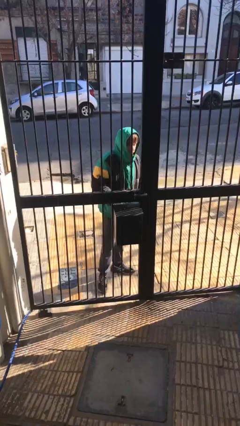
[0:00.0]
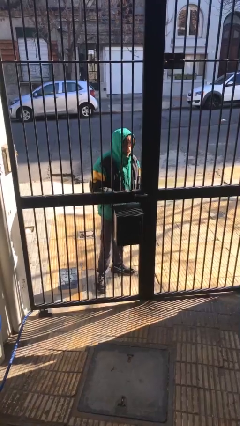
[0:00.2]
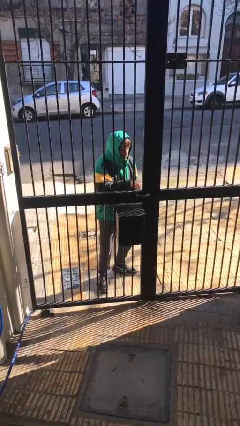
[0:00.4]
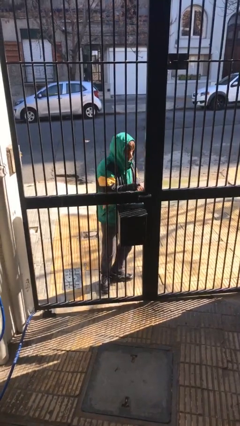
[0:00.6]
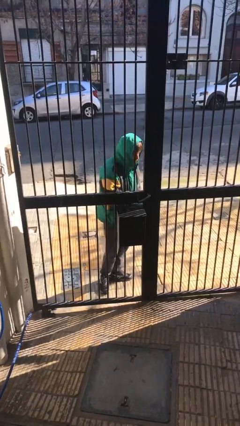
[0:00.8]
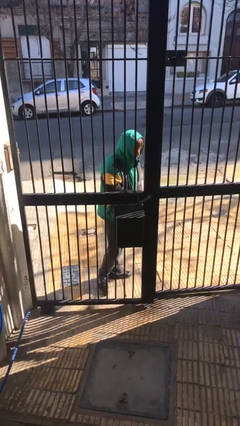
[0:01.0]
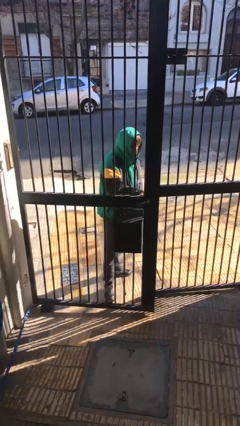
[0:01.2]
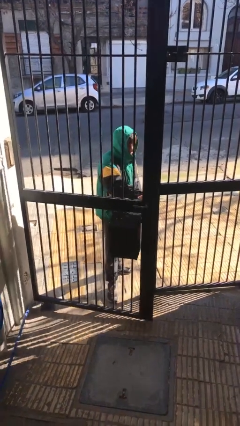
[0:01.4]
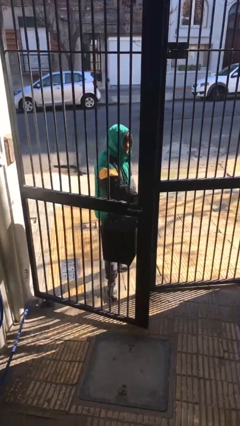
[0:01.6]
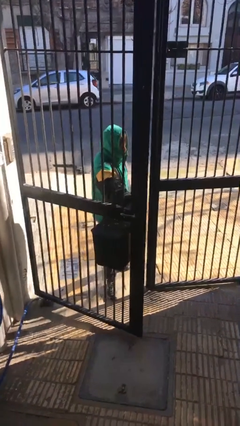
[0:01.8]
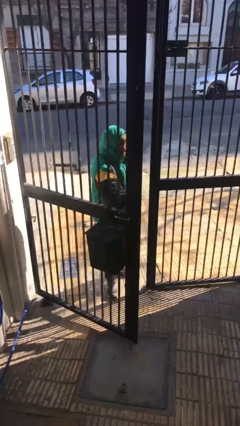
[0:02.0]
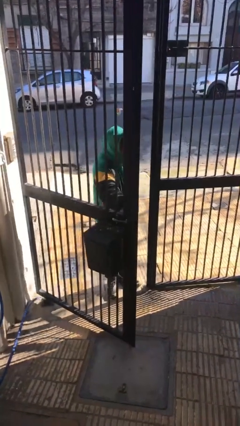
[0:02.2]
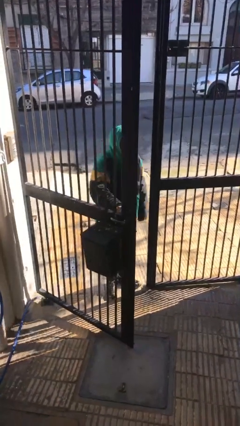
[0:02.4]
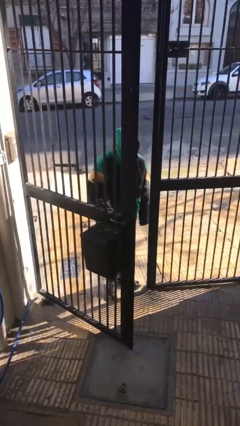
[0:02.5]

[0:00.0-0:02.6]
person opens gate

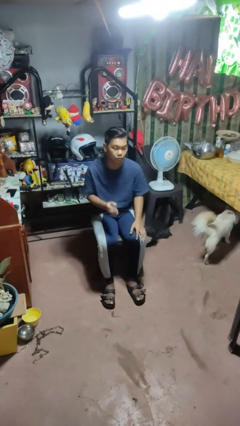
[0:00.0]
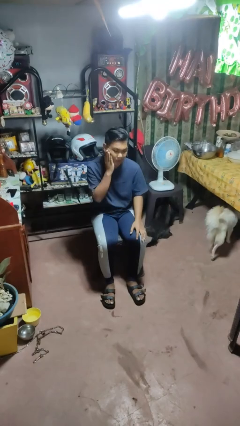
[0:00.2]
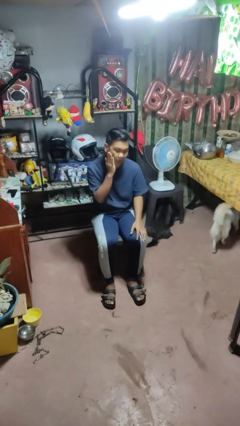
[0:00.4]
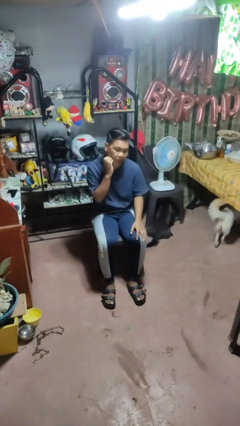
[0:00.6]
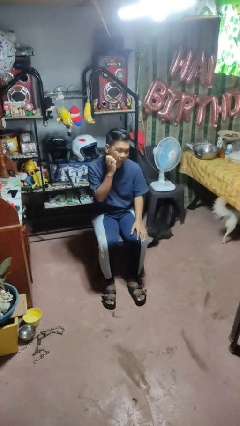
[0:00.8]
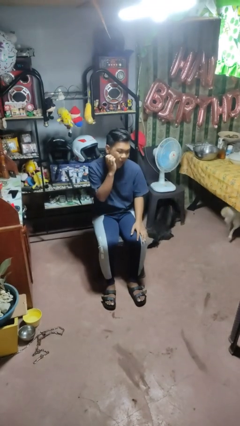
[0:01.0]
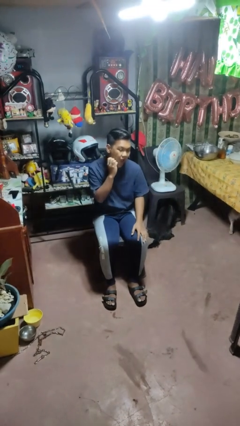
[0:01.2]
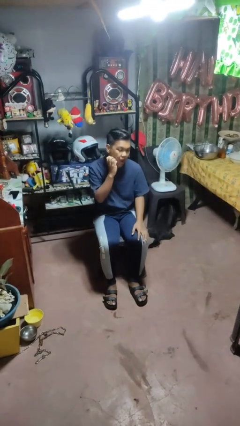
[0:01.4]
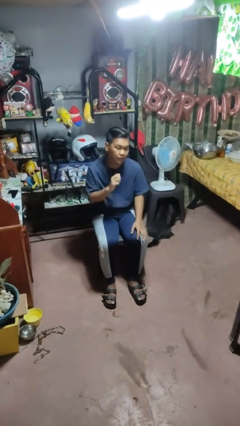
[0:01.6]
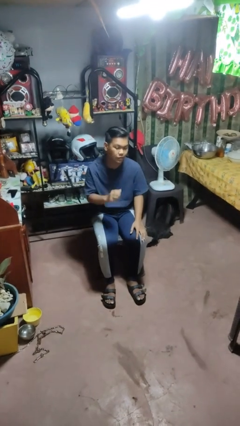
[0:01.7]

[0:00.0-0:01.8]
person scratches face

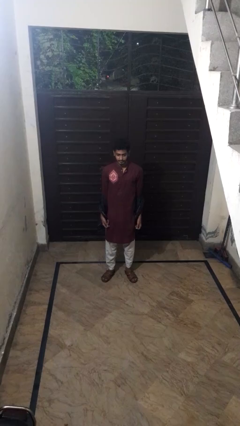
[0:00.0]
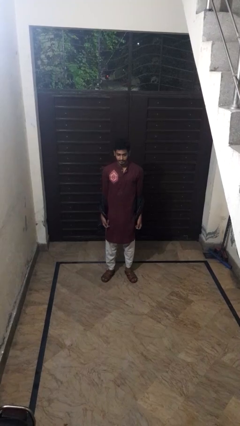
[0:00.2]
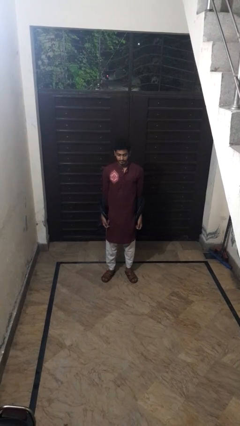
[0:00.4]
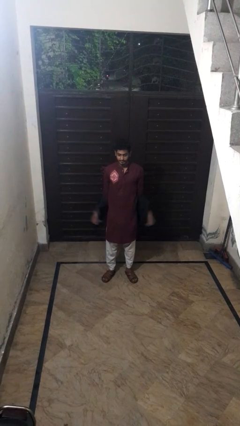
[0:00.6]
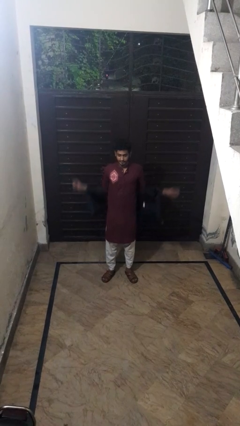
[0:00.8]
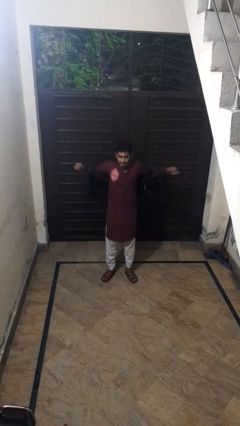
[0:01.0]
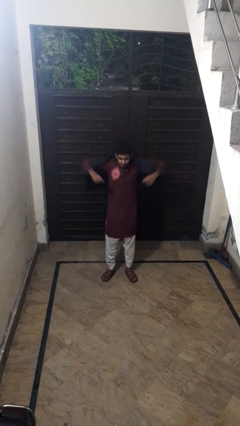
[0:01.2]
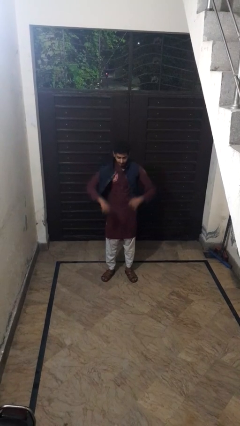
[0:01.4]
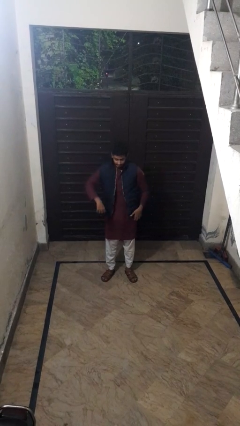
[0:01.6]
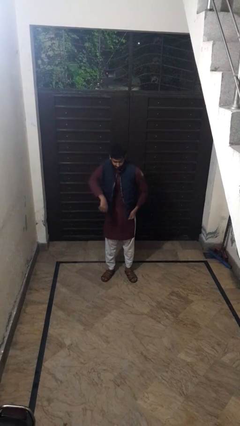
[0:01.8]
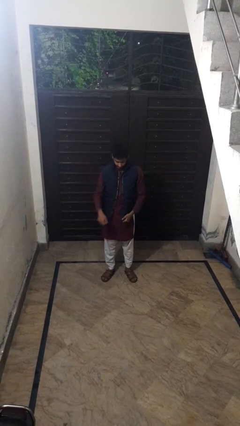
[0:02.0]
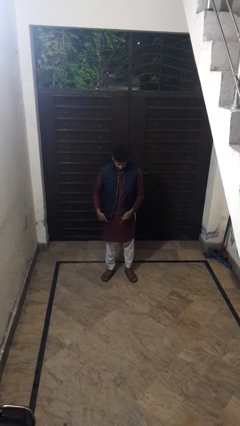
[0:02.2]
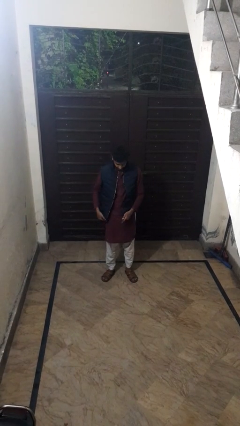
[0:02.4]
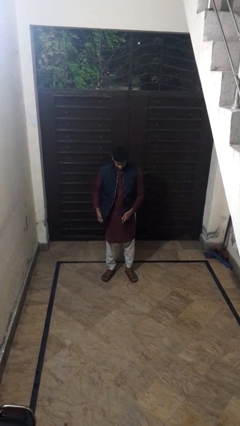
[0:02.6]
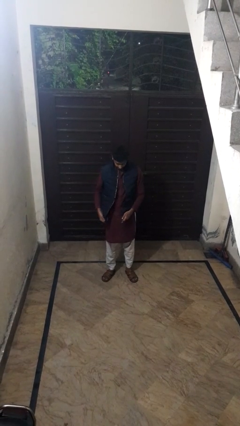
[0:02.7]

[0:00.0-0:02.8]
person puts on jacket

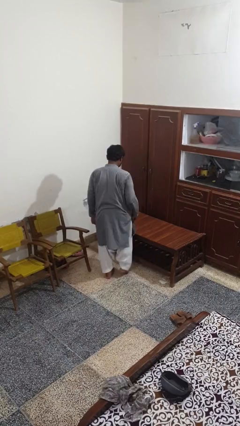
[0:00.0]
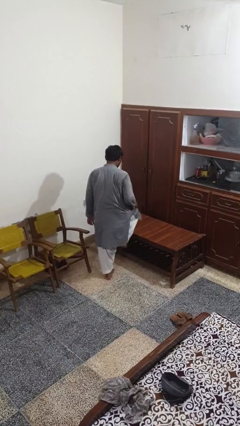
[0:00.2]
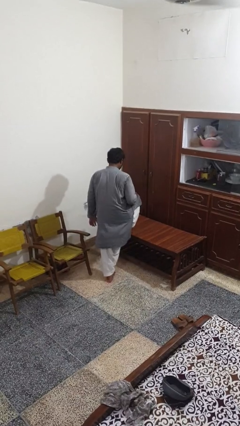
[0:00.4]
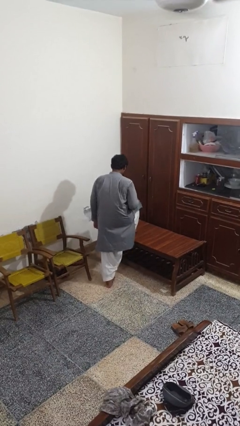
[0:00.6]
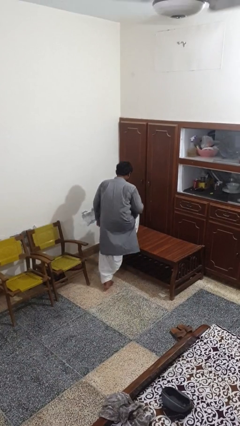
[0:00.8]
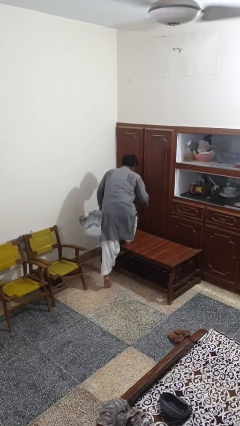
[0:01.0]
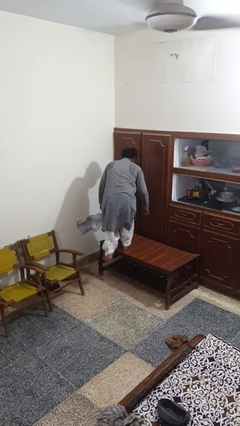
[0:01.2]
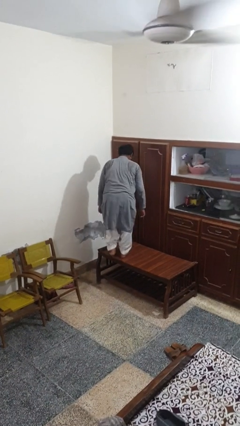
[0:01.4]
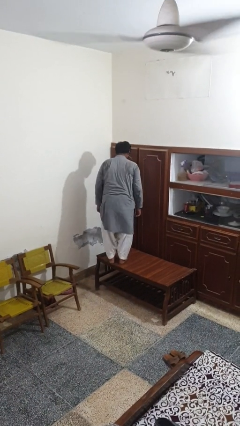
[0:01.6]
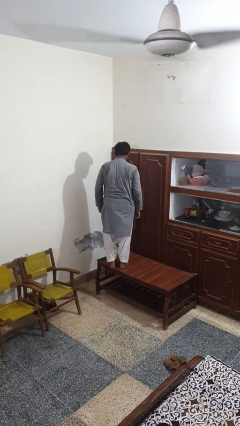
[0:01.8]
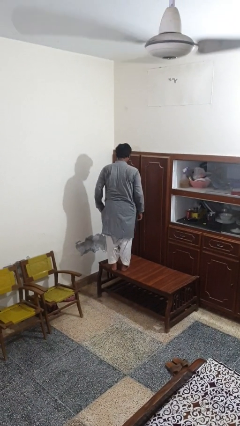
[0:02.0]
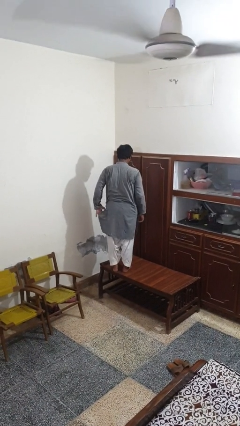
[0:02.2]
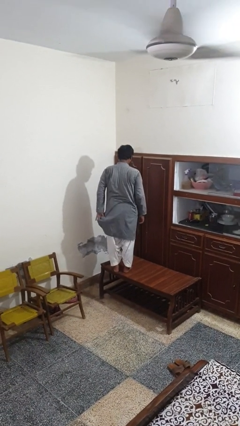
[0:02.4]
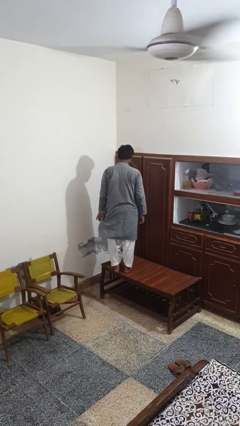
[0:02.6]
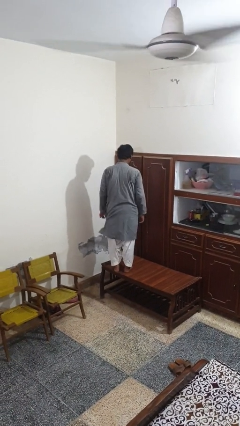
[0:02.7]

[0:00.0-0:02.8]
person climbs on table

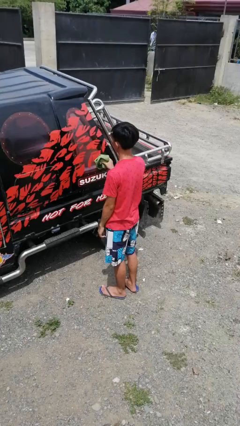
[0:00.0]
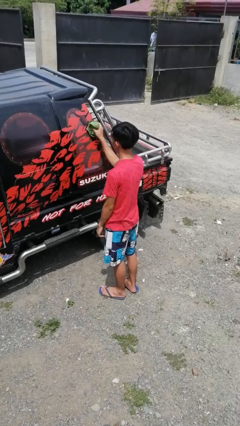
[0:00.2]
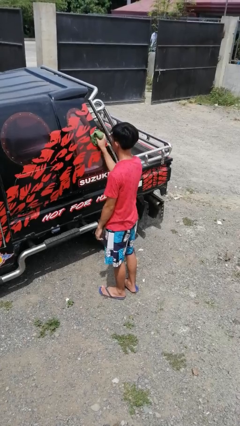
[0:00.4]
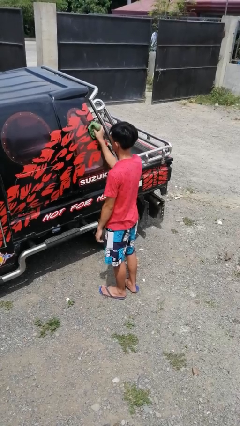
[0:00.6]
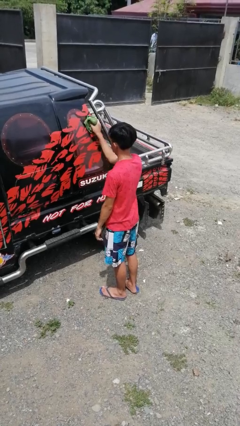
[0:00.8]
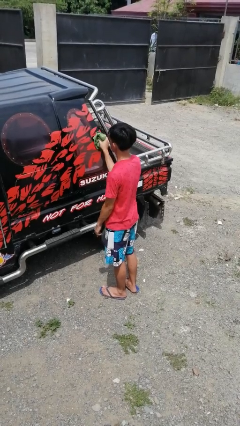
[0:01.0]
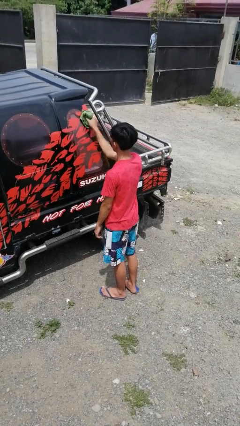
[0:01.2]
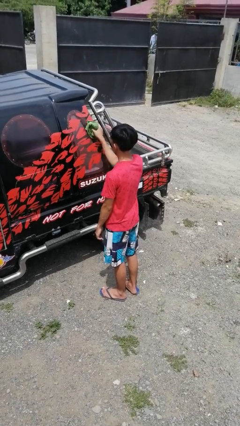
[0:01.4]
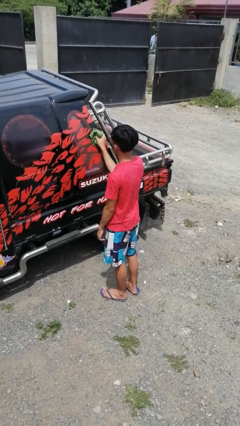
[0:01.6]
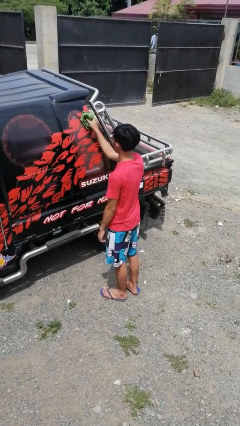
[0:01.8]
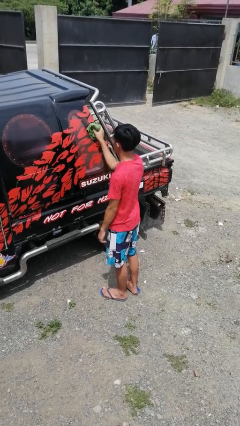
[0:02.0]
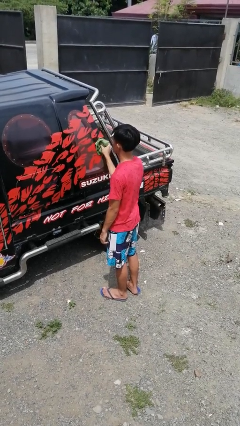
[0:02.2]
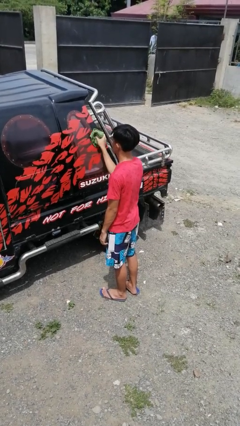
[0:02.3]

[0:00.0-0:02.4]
person polishes car with rag

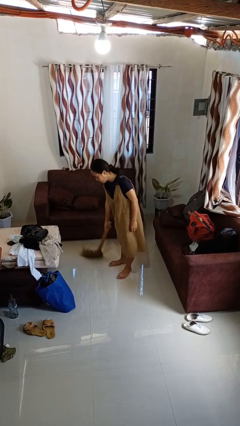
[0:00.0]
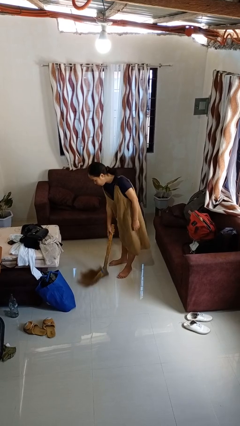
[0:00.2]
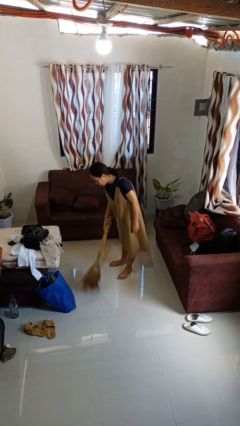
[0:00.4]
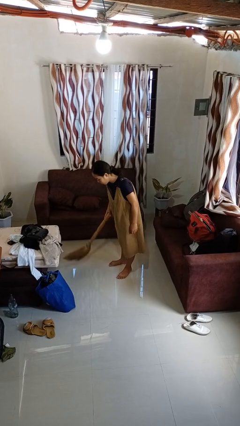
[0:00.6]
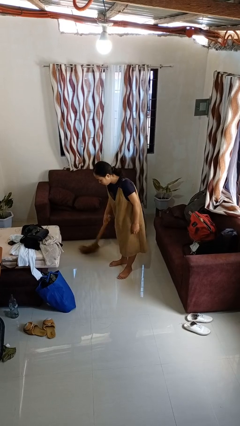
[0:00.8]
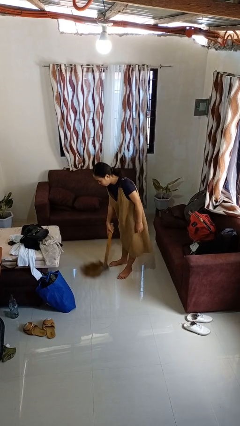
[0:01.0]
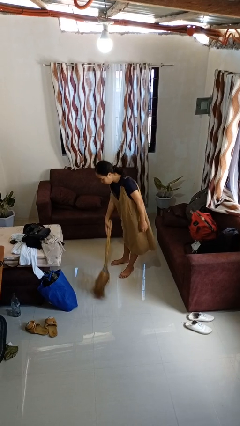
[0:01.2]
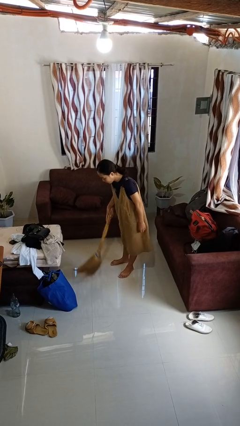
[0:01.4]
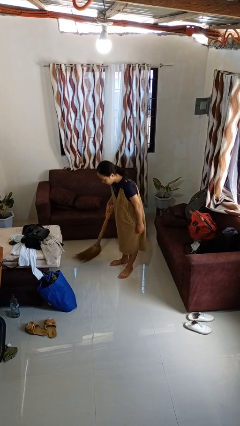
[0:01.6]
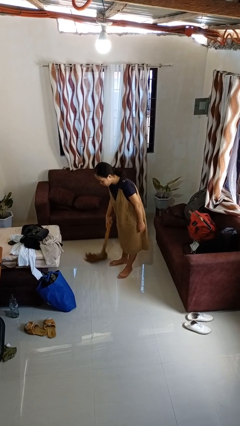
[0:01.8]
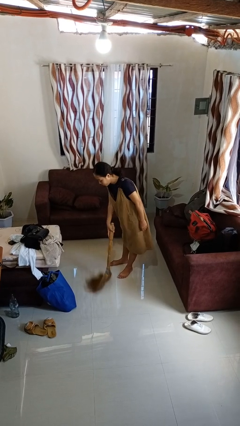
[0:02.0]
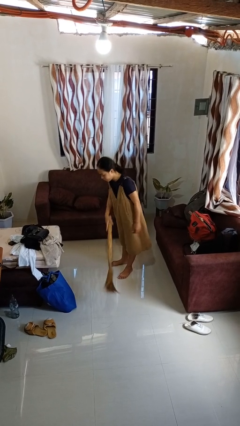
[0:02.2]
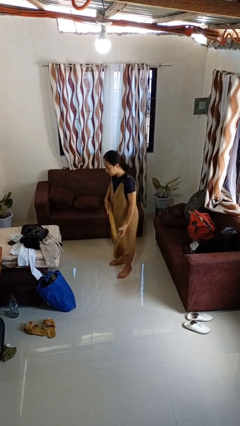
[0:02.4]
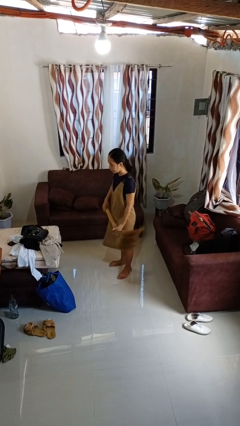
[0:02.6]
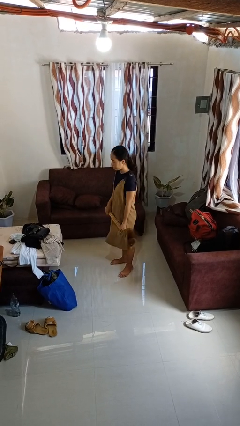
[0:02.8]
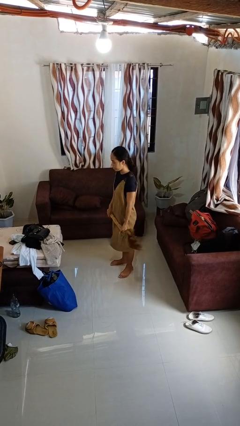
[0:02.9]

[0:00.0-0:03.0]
person sweeps floor

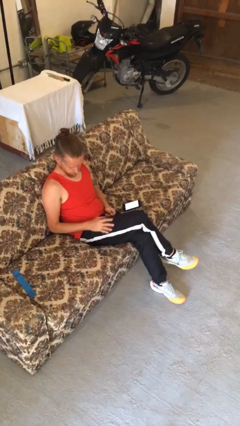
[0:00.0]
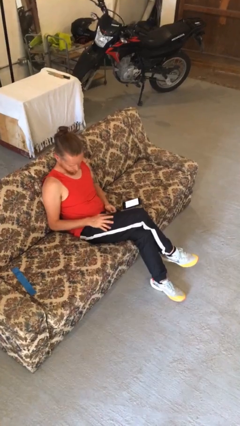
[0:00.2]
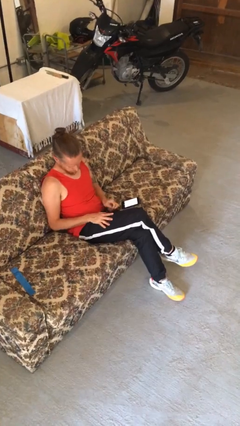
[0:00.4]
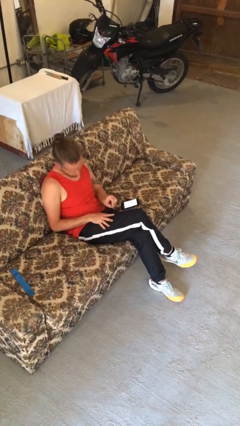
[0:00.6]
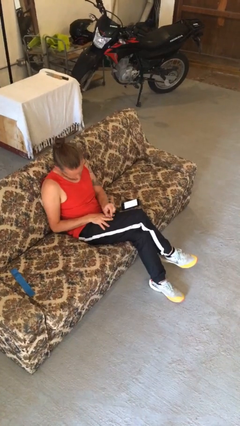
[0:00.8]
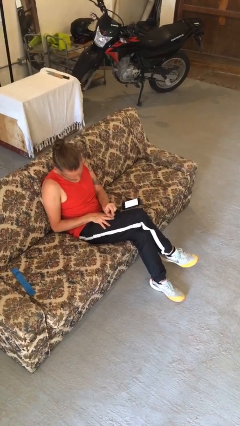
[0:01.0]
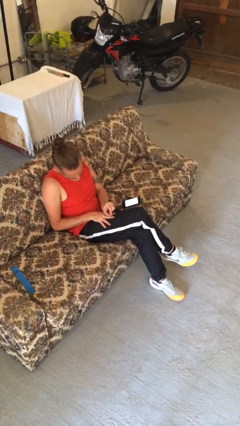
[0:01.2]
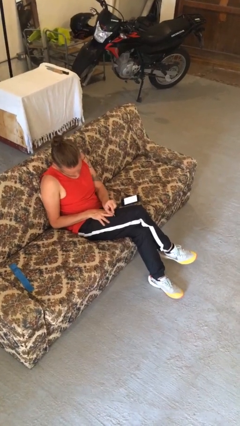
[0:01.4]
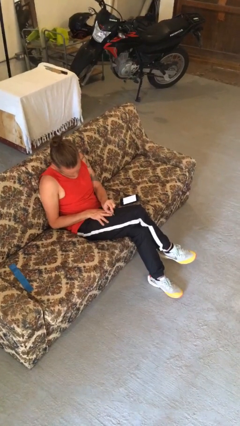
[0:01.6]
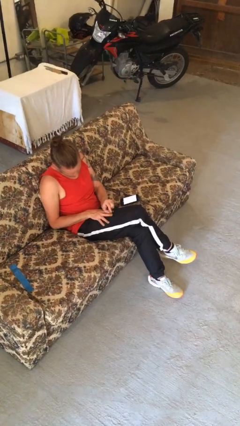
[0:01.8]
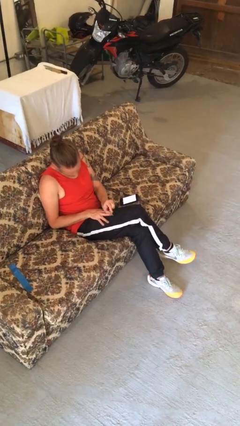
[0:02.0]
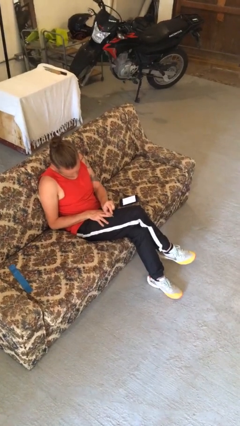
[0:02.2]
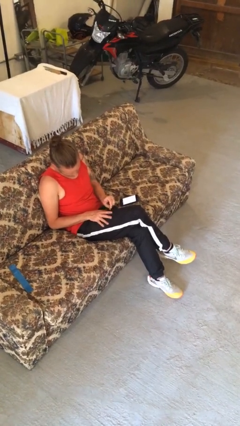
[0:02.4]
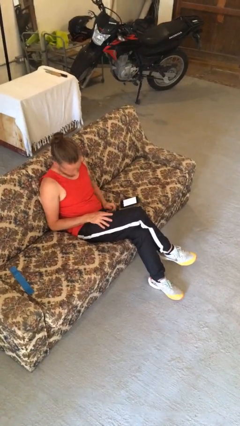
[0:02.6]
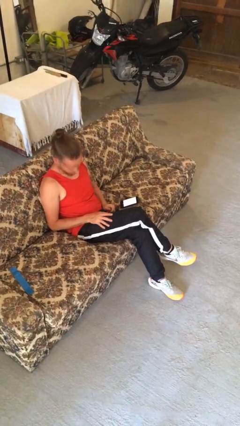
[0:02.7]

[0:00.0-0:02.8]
person files fingernails
